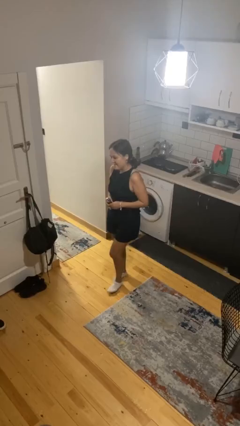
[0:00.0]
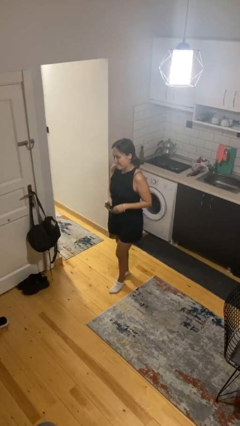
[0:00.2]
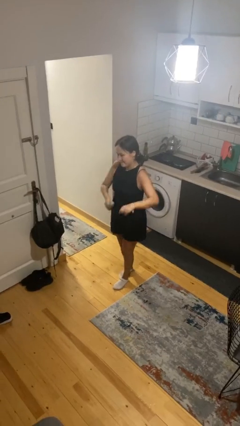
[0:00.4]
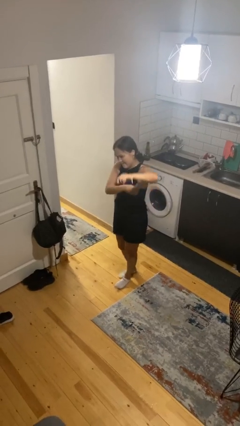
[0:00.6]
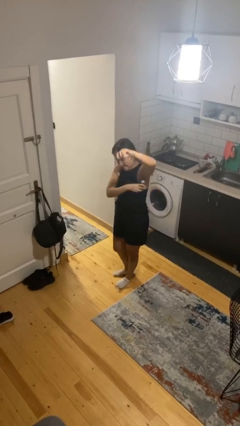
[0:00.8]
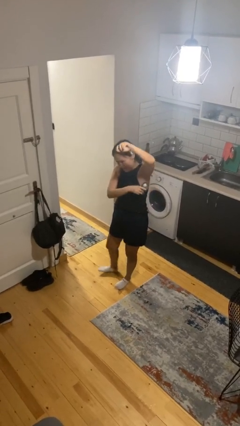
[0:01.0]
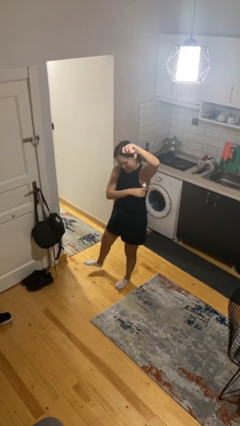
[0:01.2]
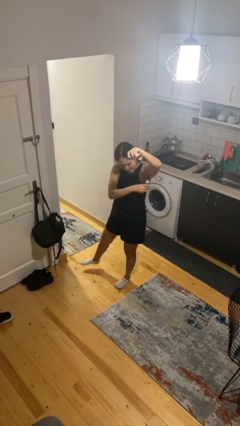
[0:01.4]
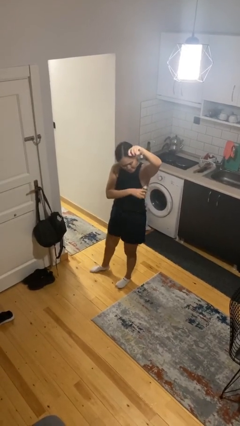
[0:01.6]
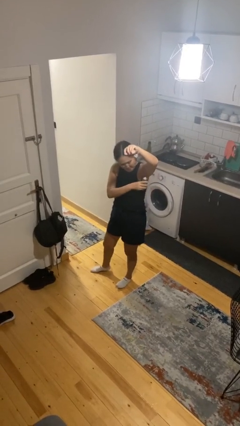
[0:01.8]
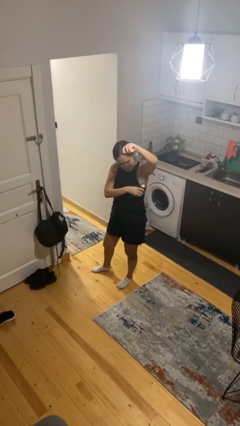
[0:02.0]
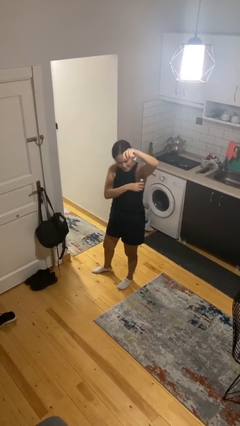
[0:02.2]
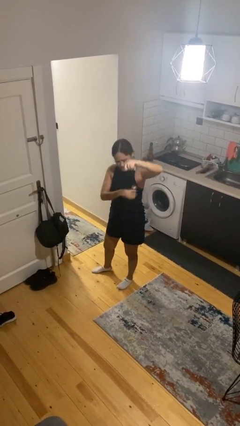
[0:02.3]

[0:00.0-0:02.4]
person applies deodorant

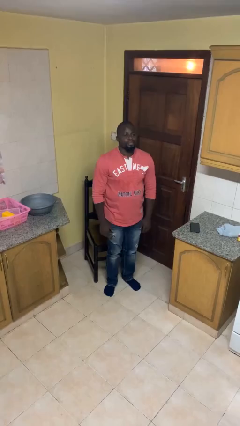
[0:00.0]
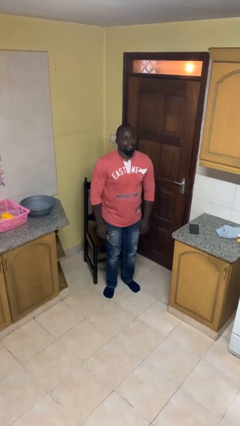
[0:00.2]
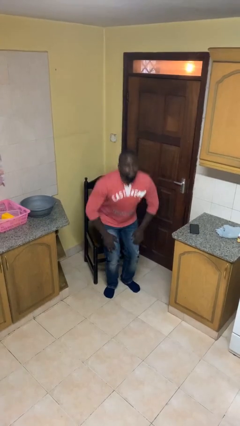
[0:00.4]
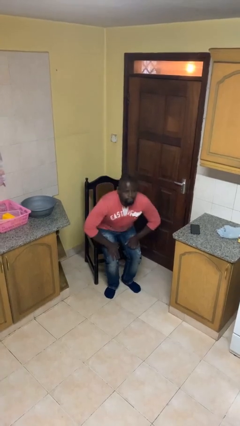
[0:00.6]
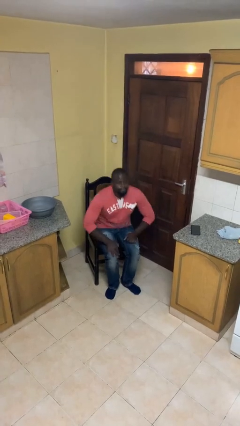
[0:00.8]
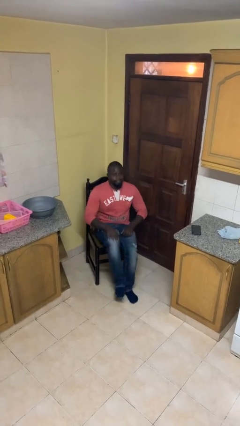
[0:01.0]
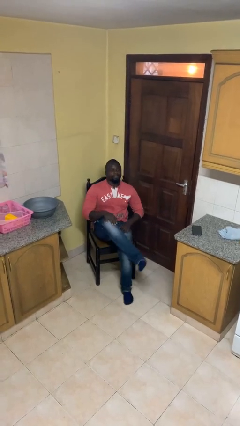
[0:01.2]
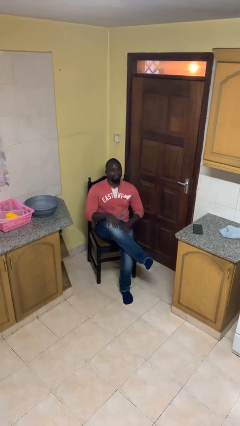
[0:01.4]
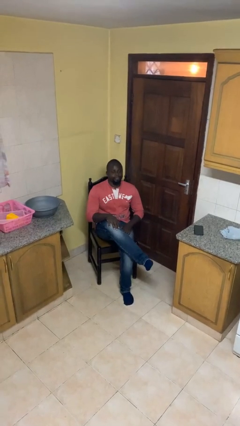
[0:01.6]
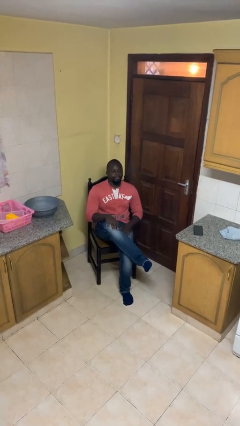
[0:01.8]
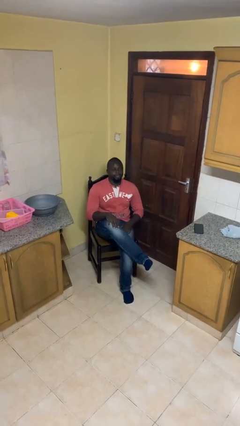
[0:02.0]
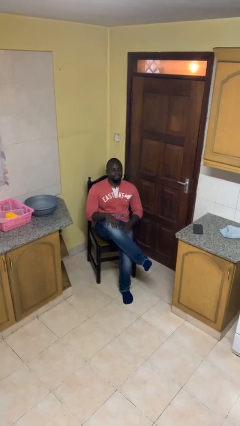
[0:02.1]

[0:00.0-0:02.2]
person sits down

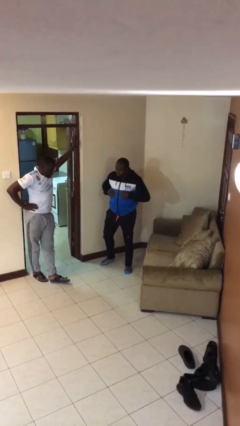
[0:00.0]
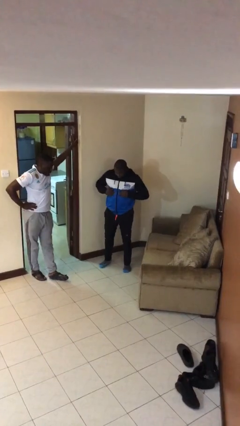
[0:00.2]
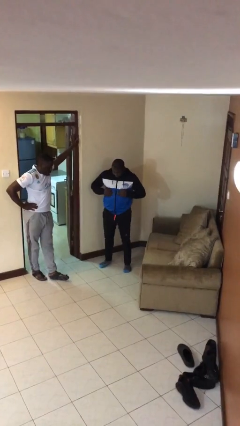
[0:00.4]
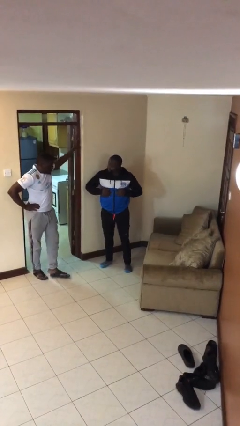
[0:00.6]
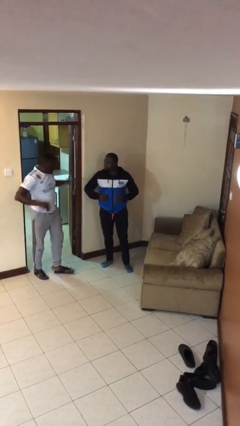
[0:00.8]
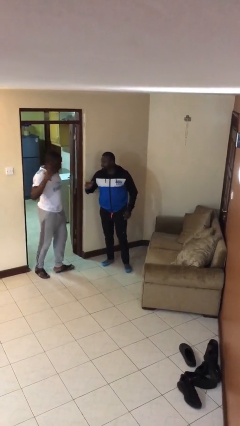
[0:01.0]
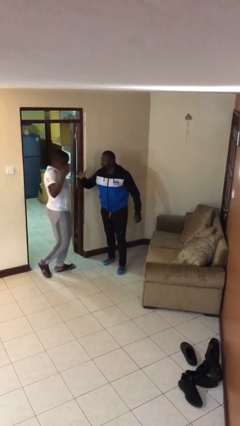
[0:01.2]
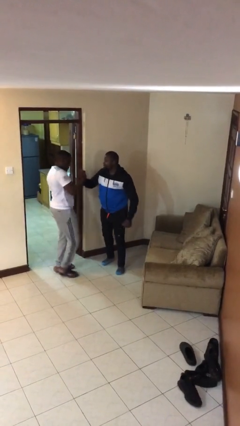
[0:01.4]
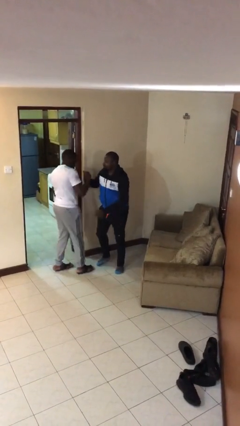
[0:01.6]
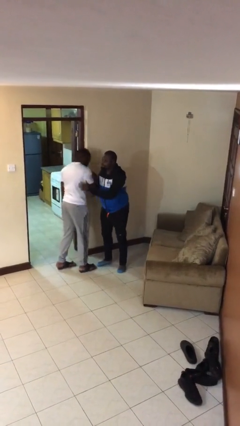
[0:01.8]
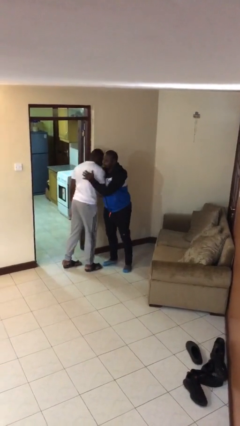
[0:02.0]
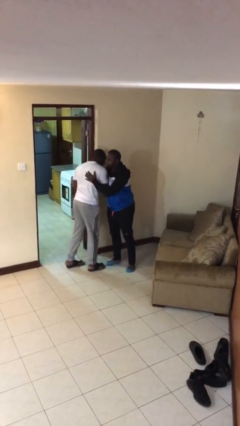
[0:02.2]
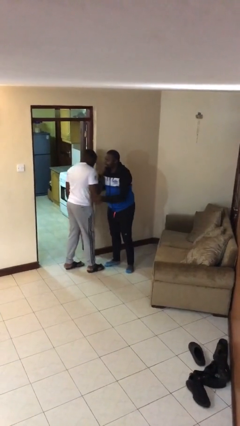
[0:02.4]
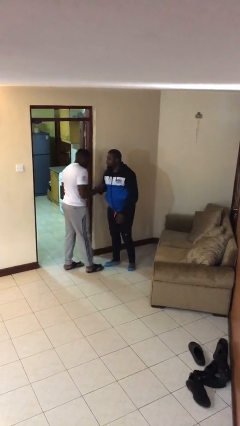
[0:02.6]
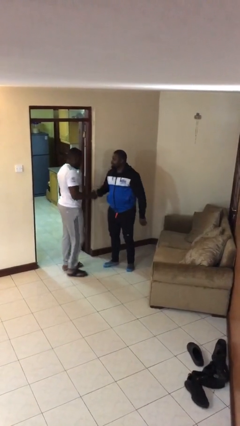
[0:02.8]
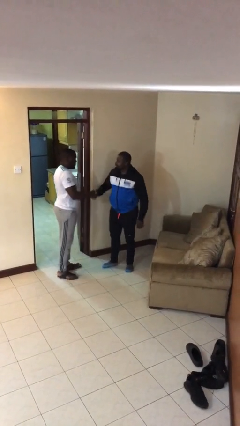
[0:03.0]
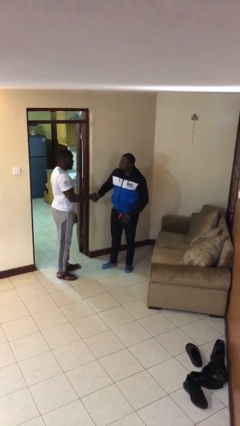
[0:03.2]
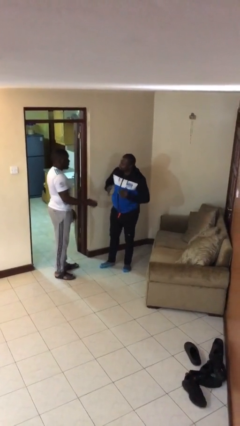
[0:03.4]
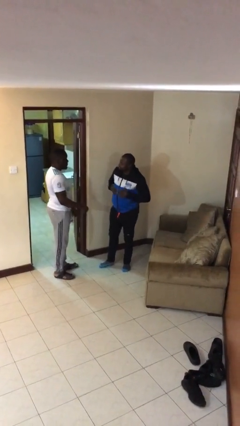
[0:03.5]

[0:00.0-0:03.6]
person embraces person

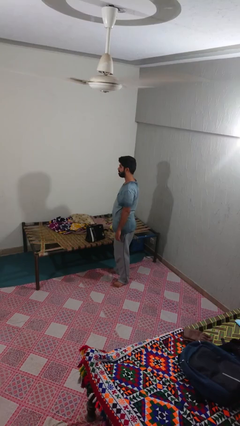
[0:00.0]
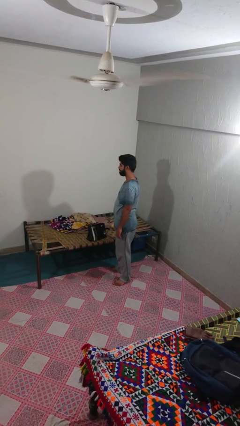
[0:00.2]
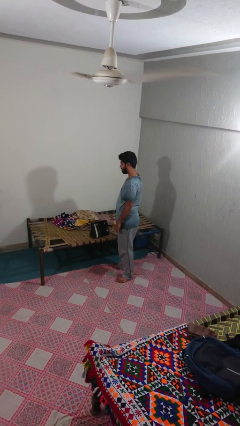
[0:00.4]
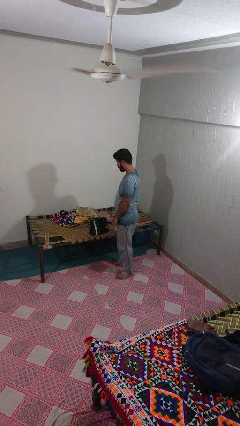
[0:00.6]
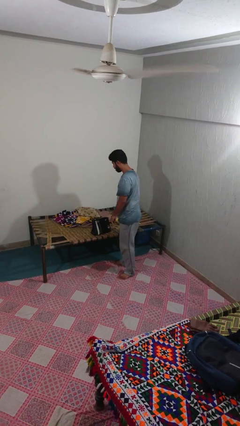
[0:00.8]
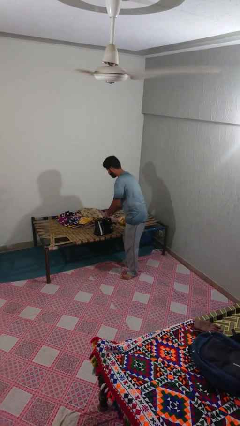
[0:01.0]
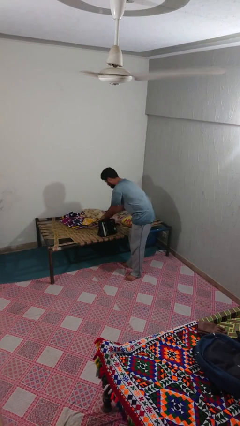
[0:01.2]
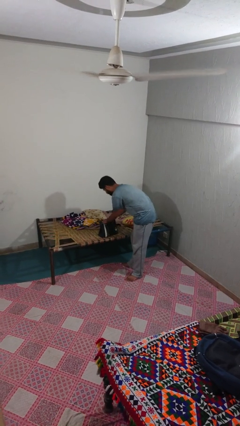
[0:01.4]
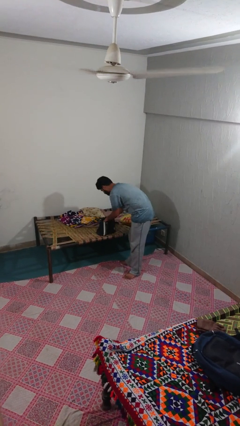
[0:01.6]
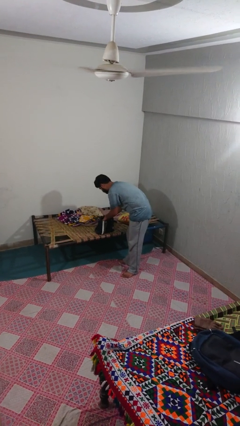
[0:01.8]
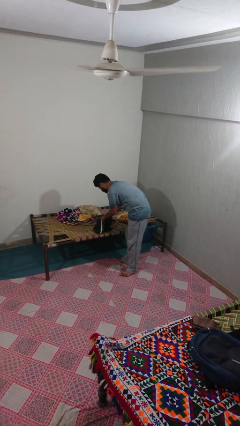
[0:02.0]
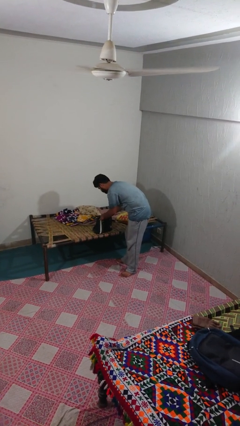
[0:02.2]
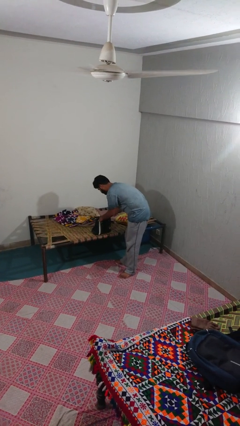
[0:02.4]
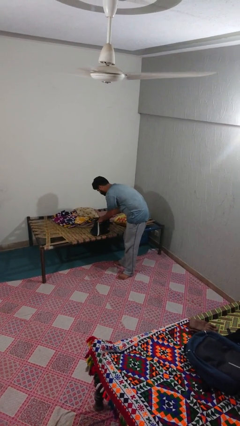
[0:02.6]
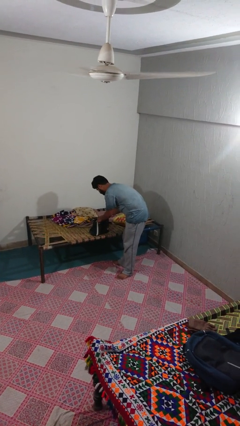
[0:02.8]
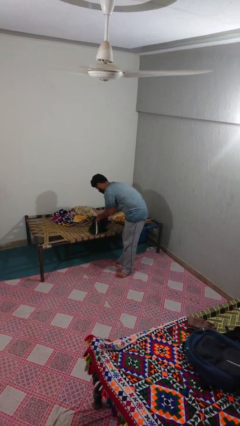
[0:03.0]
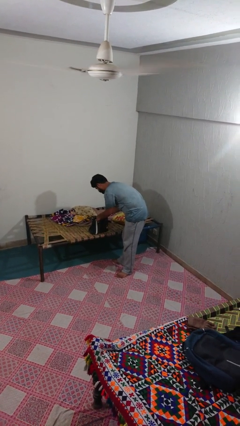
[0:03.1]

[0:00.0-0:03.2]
person searches in purse

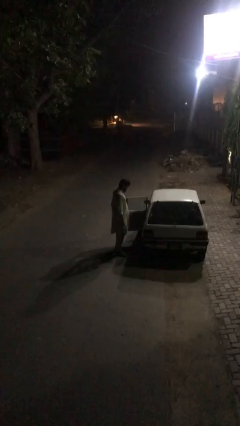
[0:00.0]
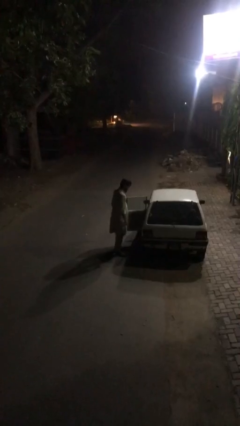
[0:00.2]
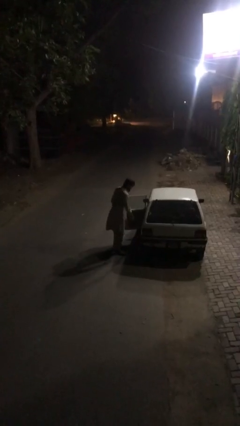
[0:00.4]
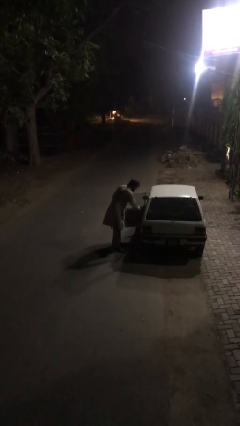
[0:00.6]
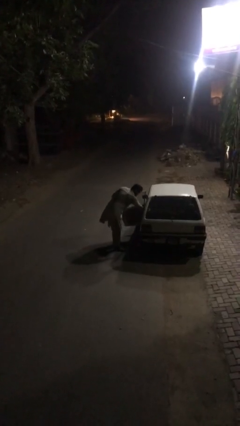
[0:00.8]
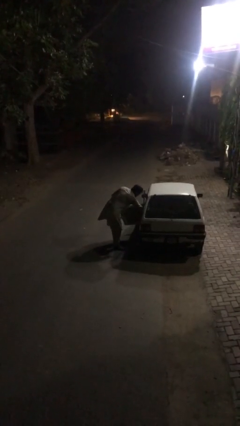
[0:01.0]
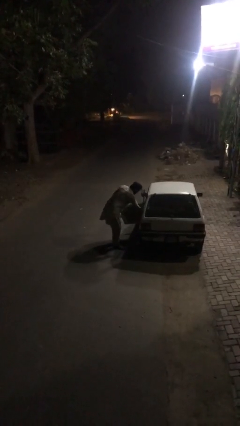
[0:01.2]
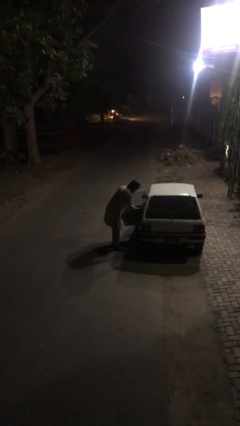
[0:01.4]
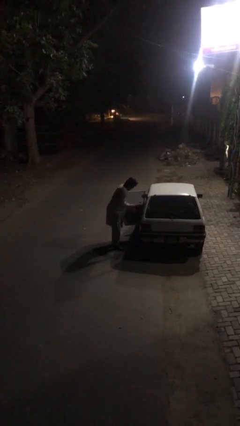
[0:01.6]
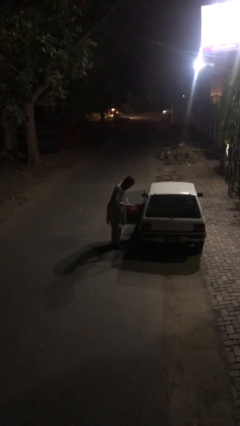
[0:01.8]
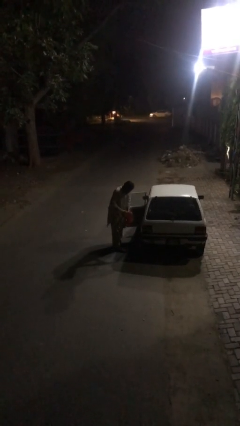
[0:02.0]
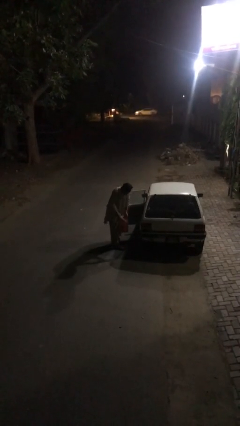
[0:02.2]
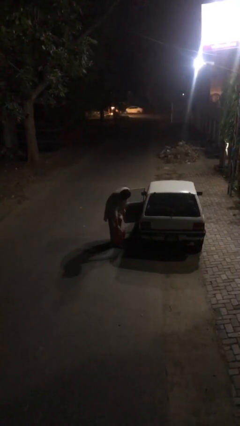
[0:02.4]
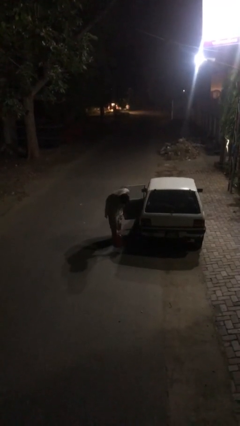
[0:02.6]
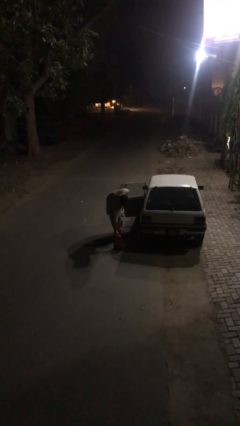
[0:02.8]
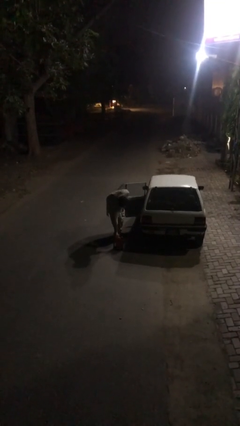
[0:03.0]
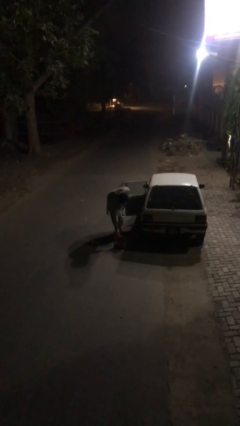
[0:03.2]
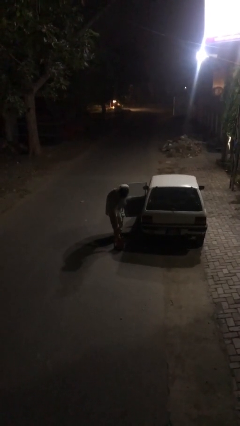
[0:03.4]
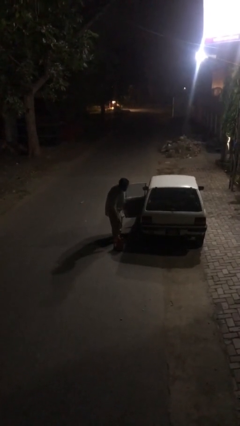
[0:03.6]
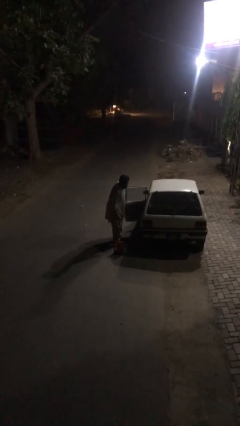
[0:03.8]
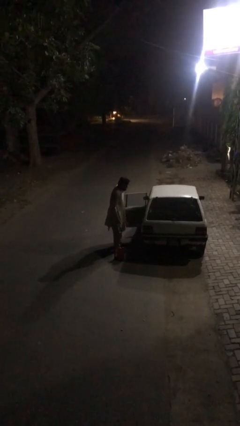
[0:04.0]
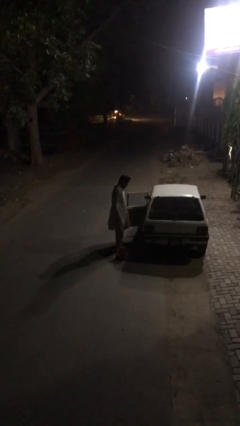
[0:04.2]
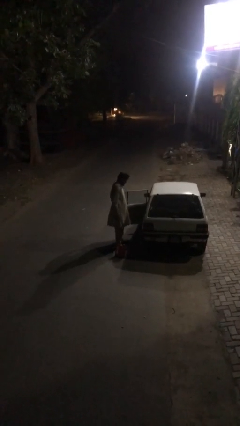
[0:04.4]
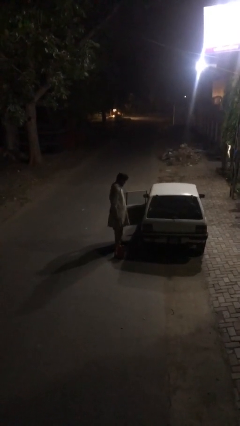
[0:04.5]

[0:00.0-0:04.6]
person unloads car

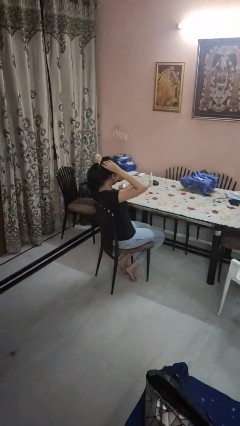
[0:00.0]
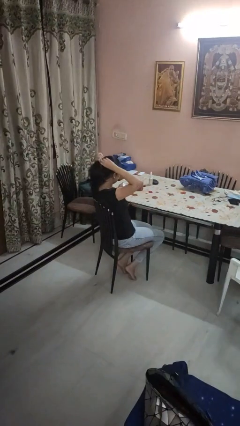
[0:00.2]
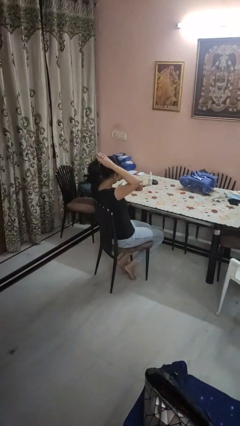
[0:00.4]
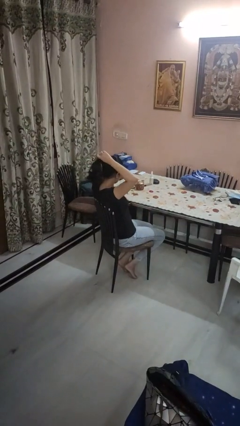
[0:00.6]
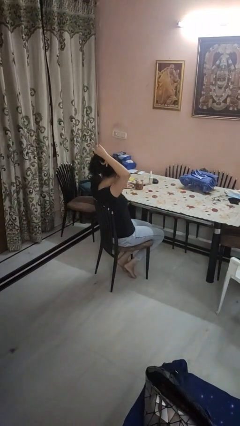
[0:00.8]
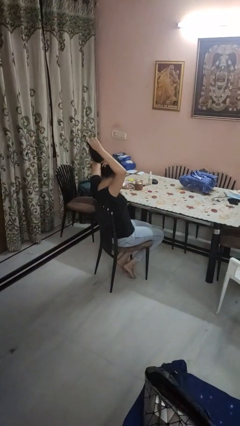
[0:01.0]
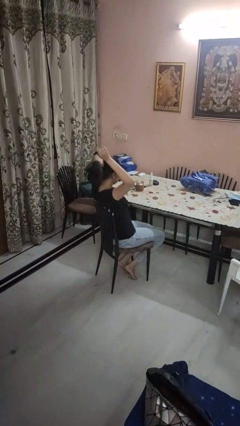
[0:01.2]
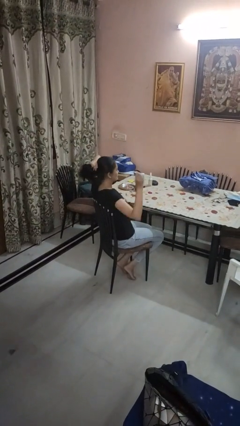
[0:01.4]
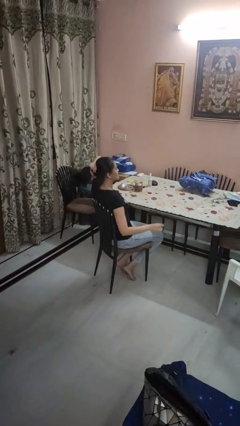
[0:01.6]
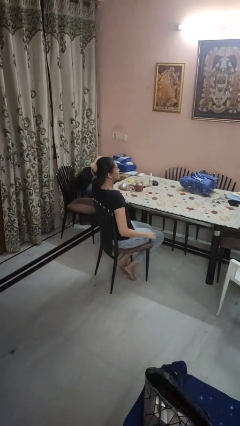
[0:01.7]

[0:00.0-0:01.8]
person takes off hairtie
